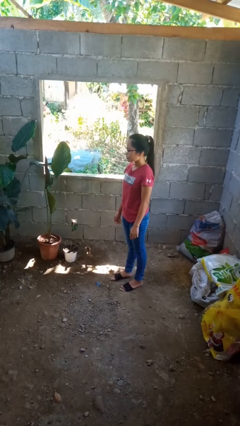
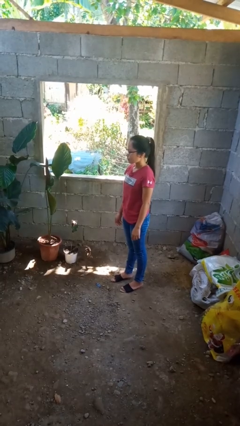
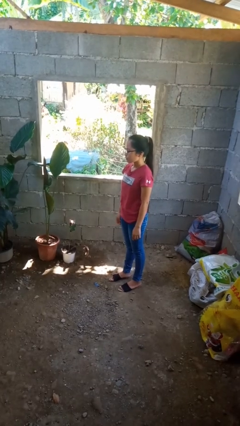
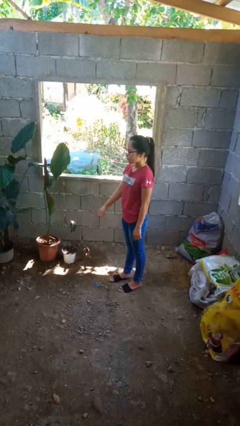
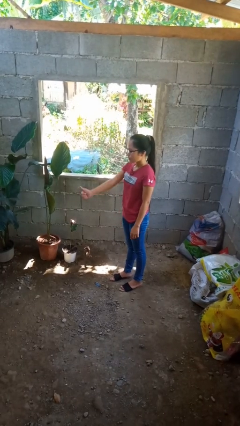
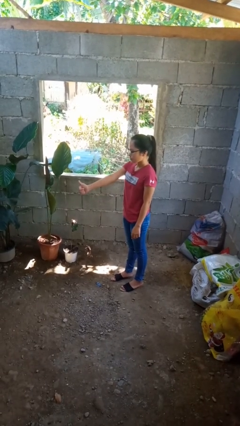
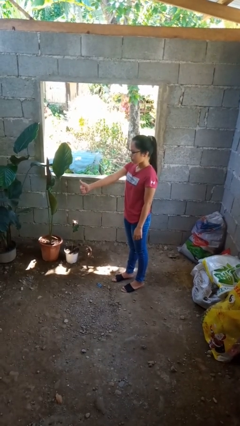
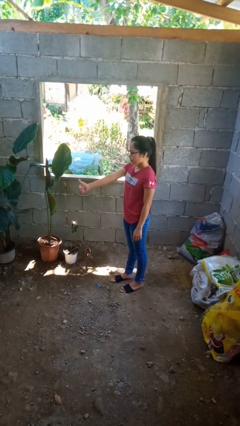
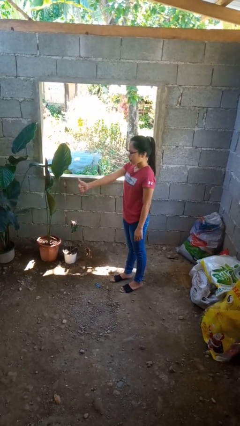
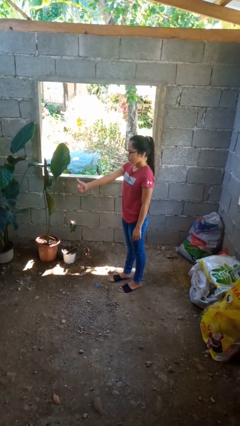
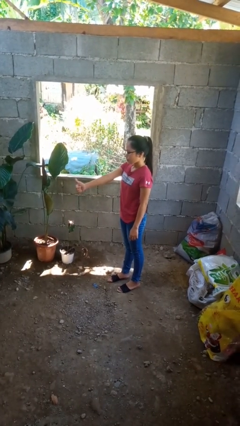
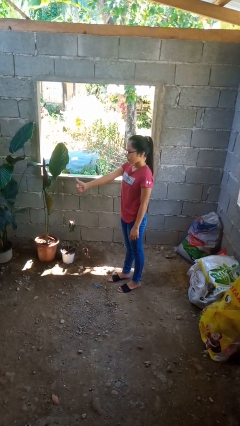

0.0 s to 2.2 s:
person gestures thumbs up

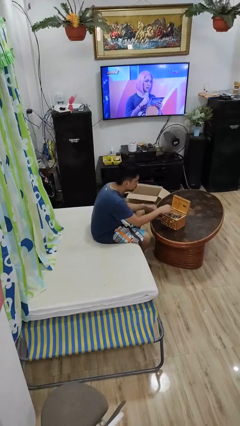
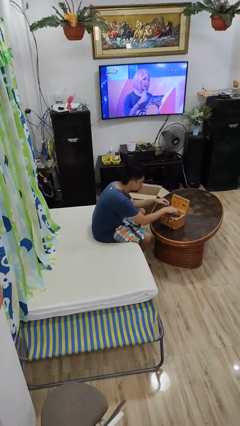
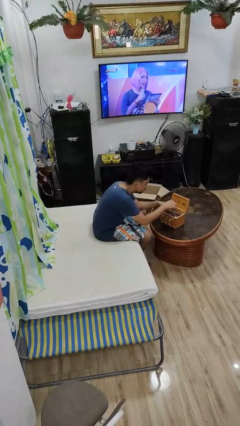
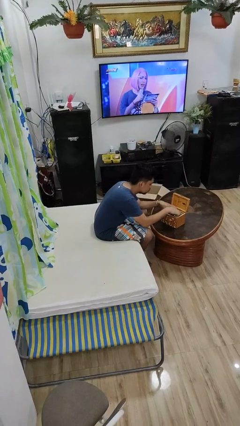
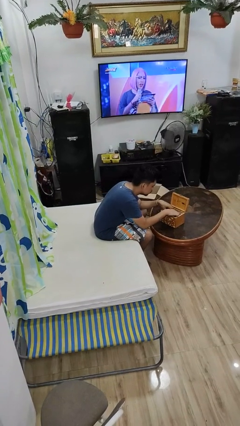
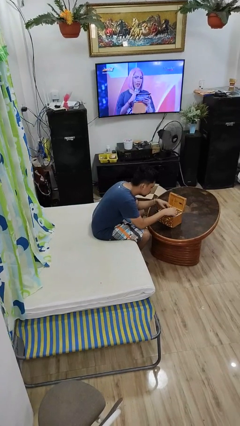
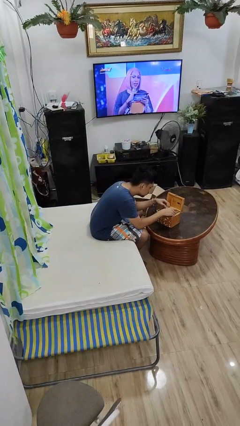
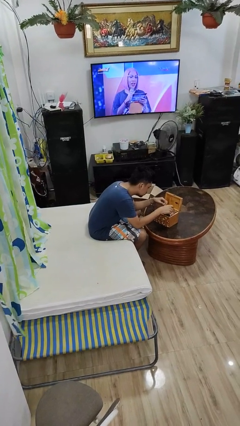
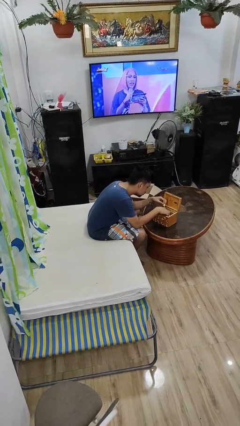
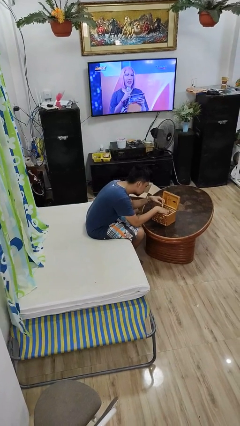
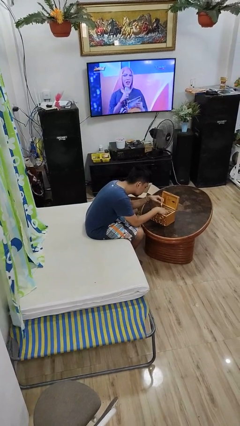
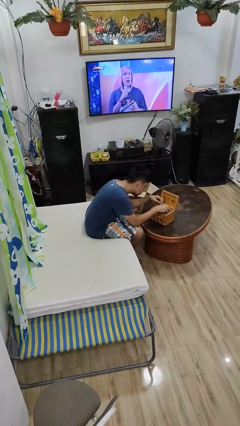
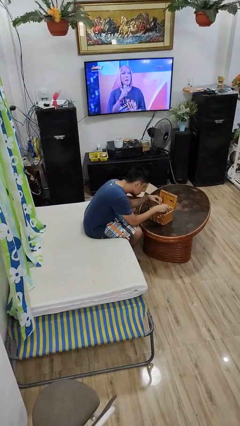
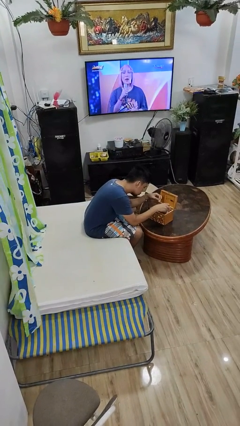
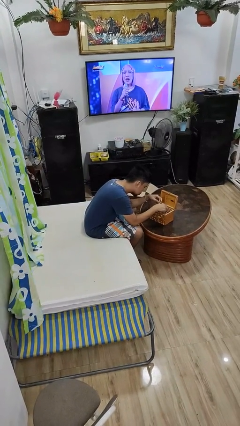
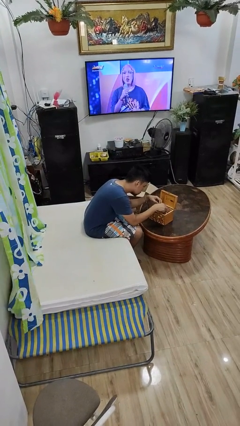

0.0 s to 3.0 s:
person searches jewelry box

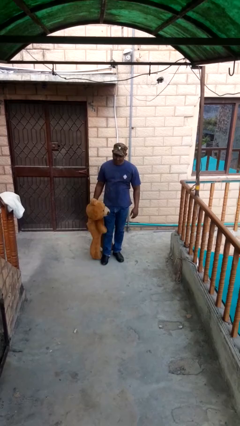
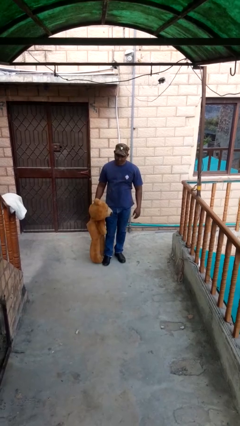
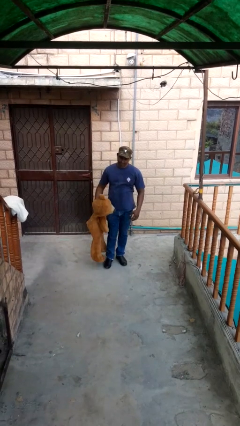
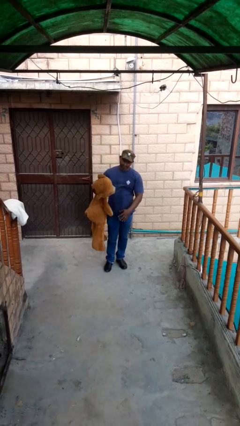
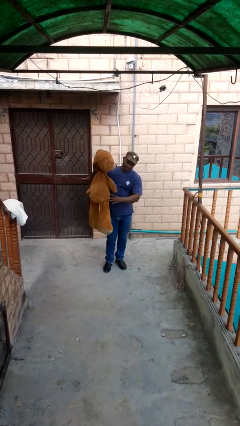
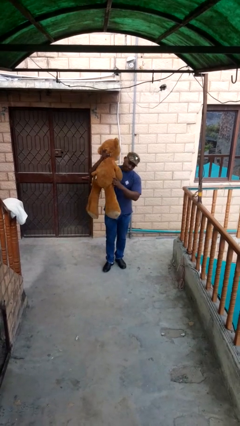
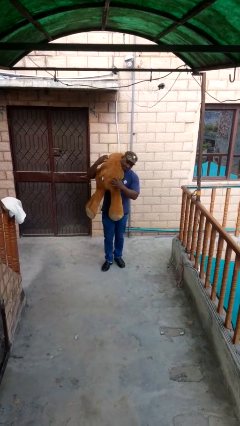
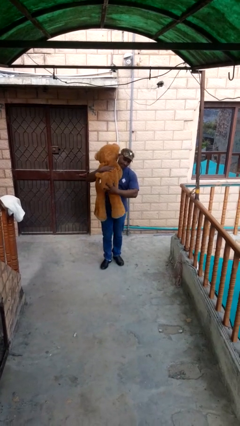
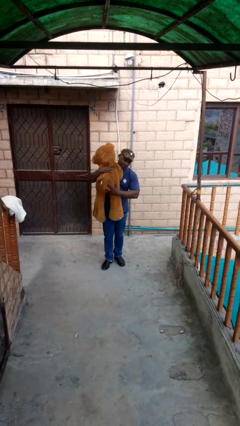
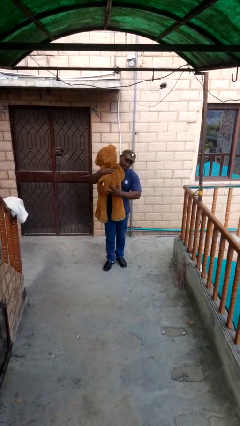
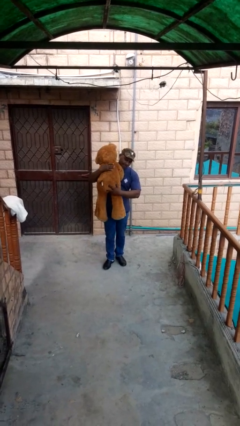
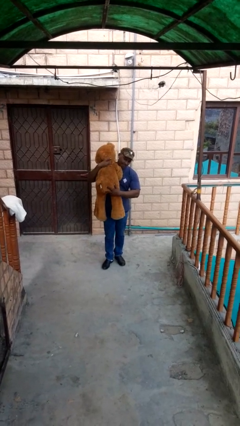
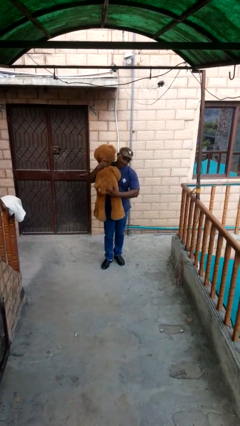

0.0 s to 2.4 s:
person hugs stuffed animal

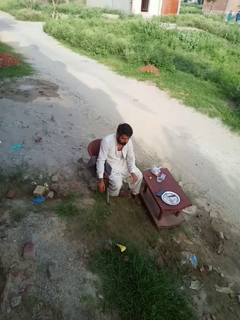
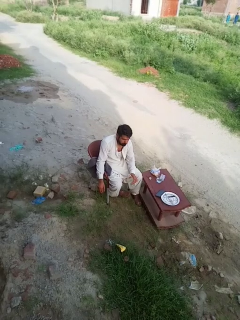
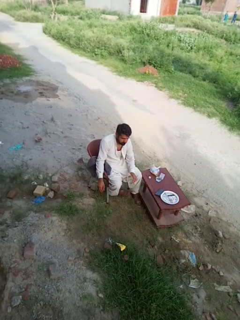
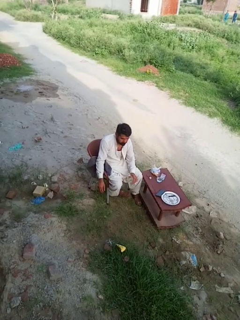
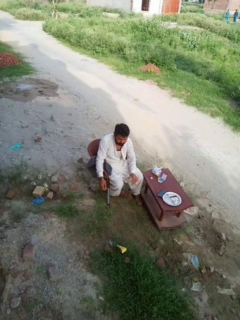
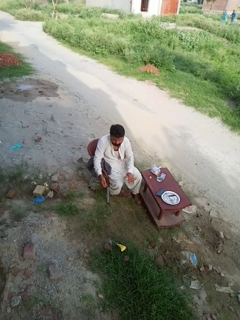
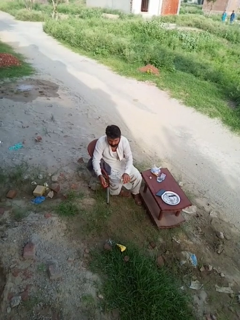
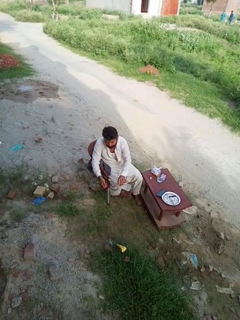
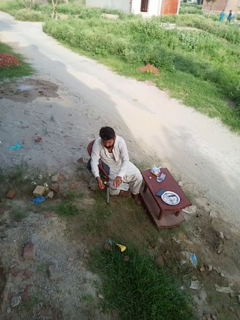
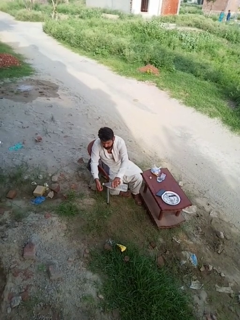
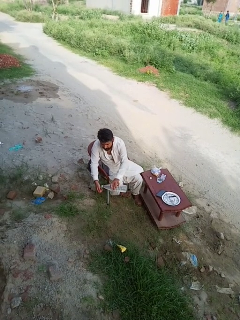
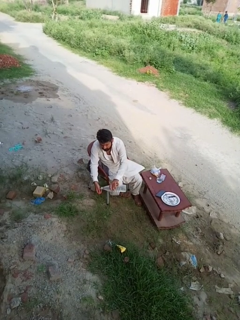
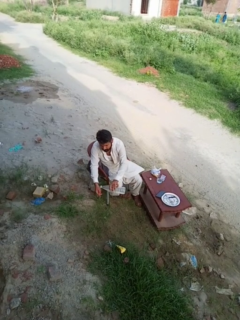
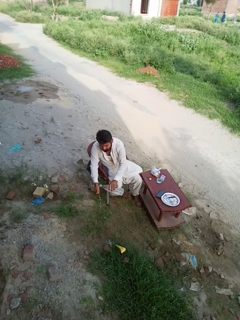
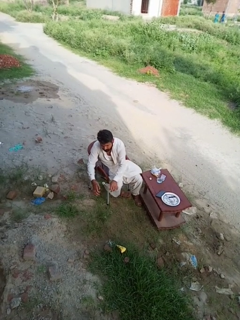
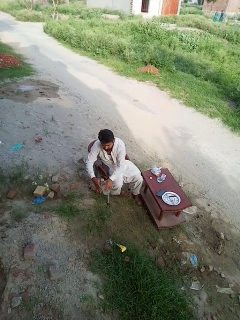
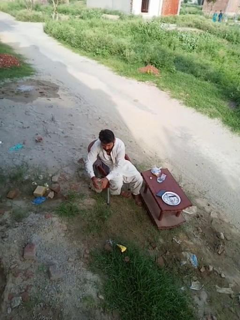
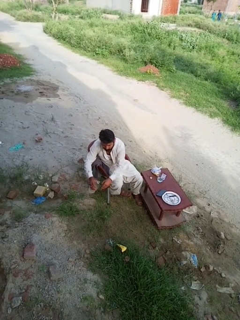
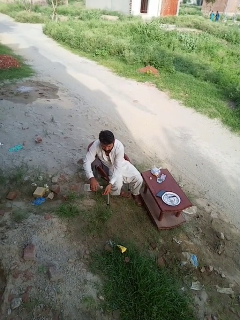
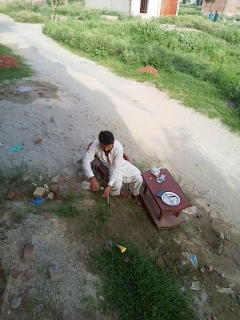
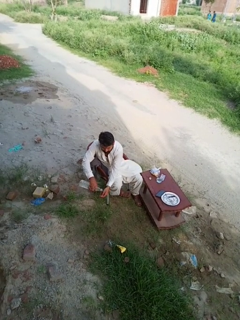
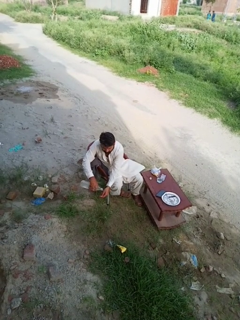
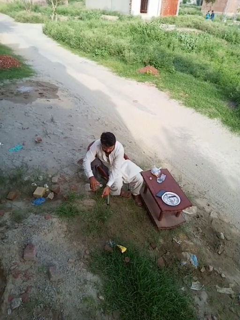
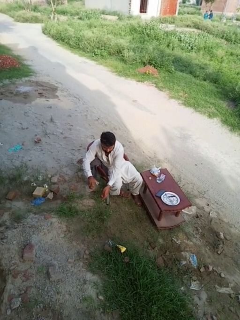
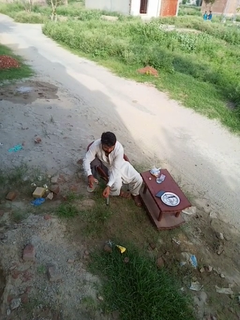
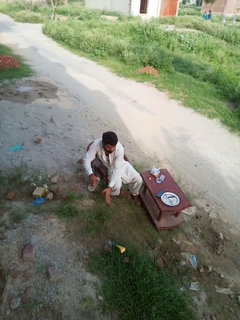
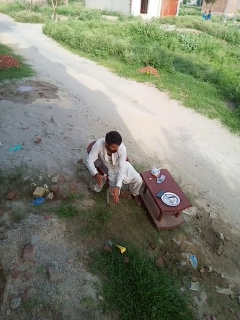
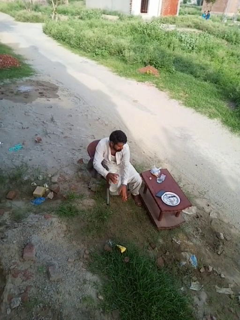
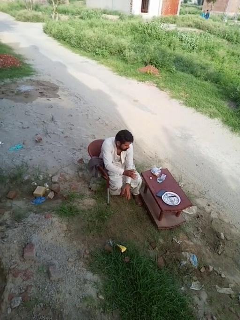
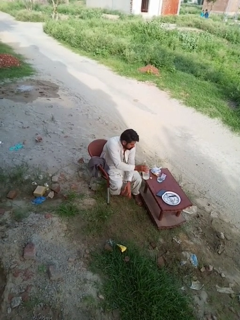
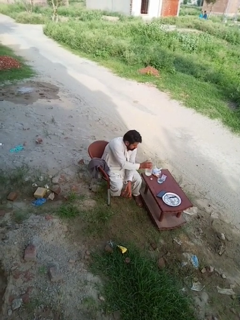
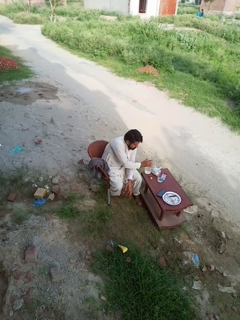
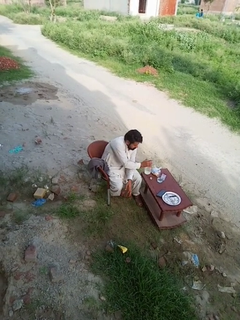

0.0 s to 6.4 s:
person washes hands

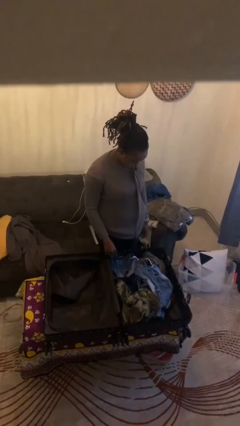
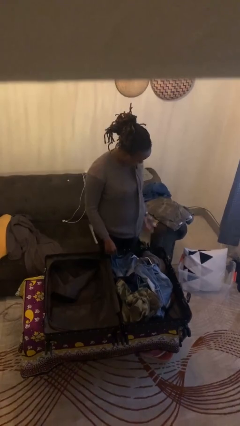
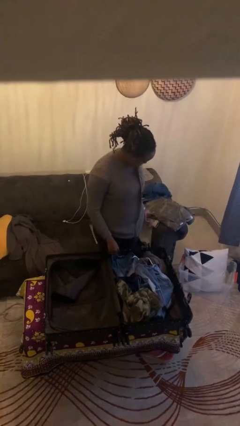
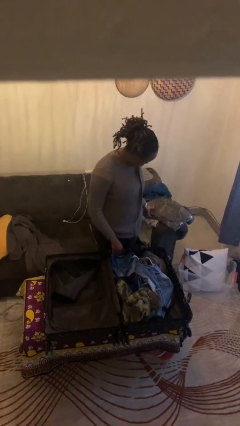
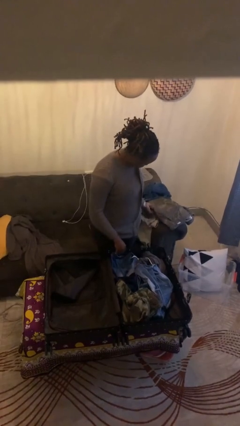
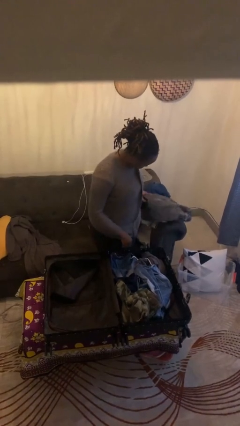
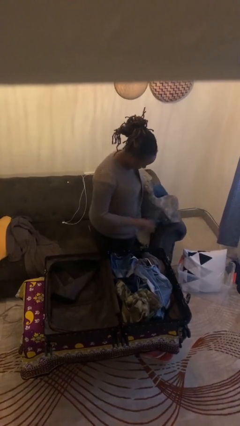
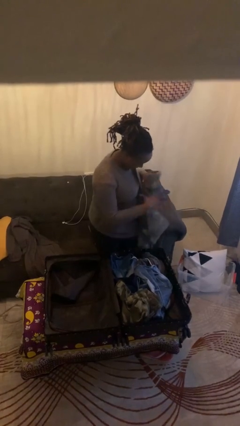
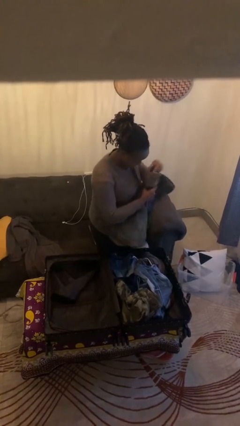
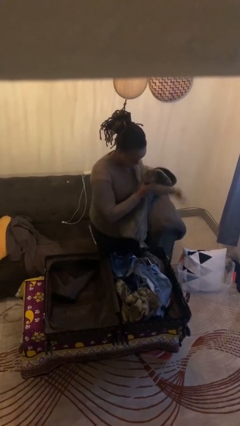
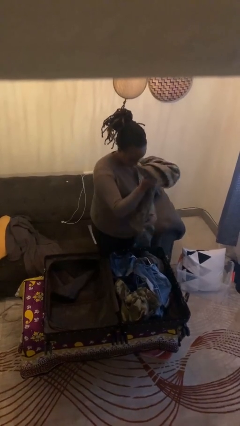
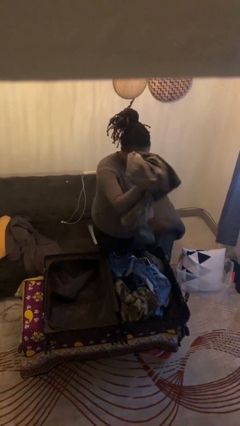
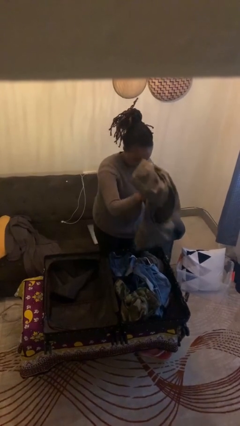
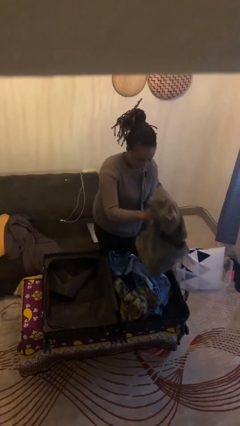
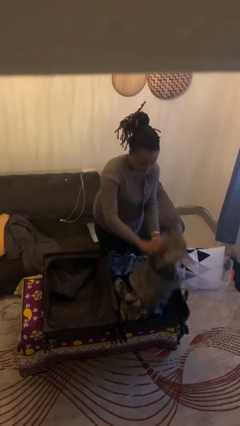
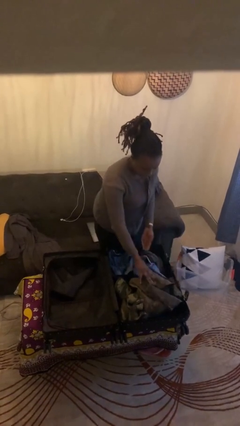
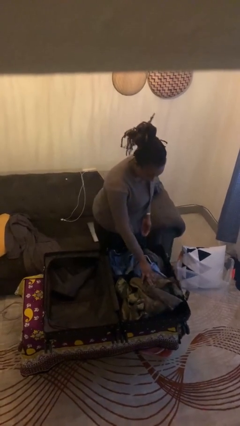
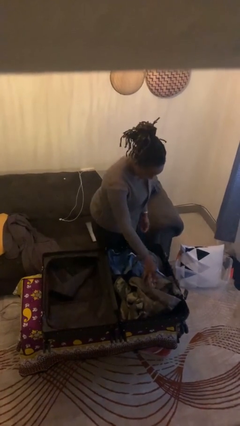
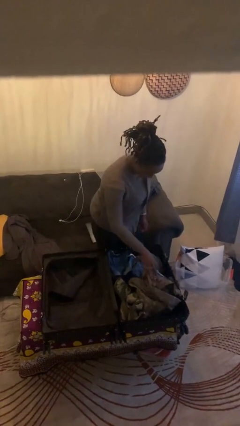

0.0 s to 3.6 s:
person loads clothes into suitcase

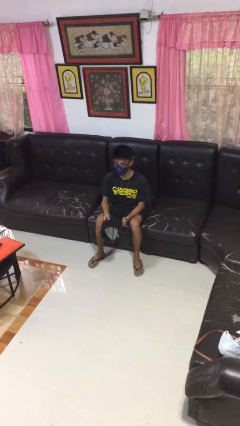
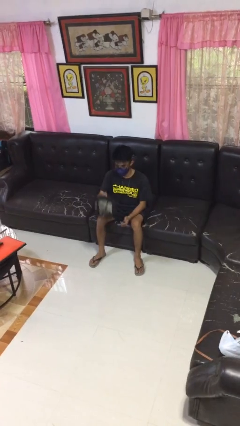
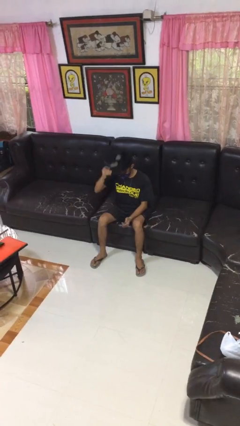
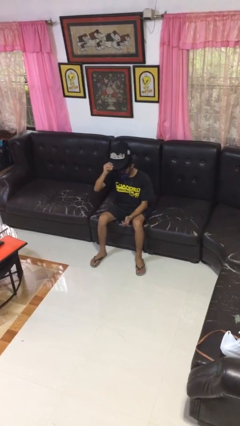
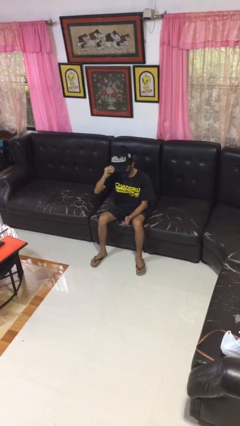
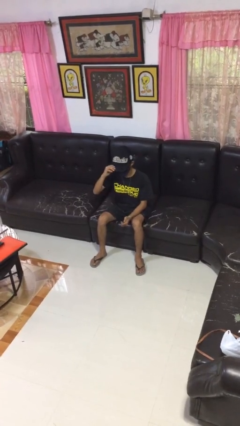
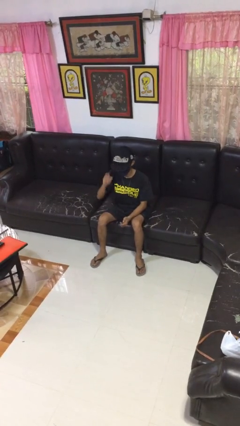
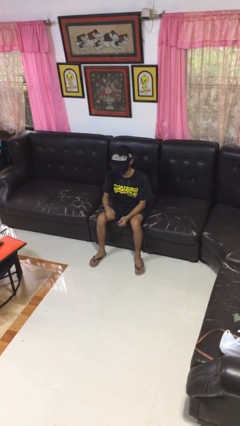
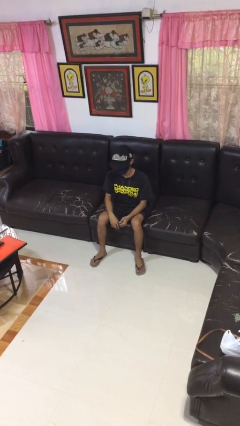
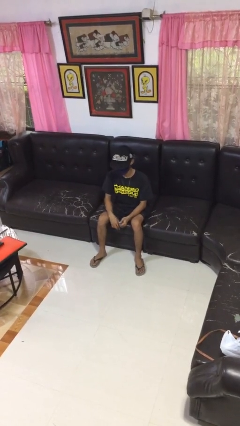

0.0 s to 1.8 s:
person puts on hat
